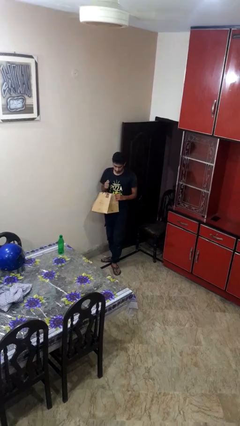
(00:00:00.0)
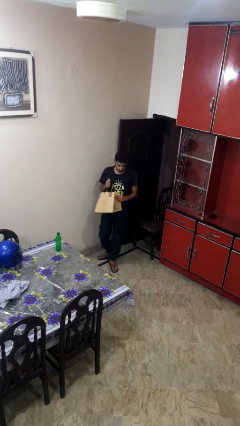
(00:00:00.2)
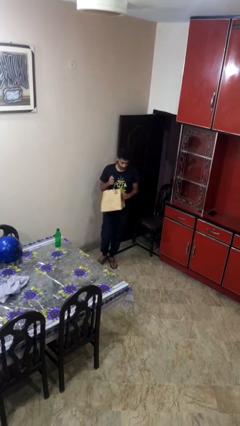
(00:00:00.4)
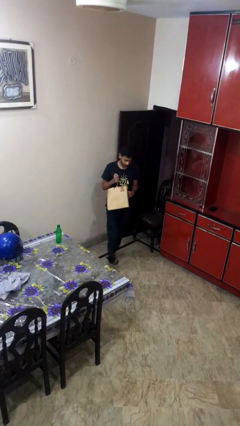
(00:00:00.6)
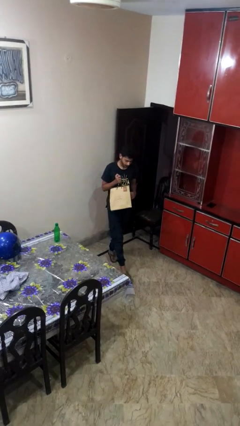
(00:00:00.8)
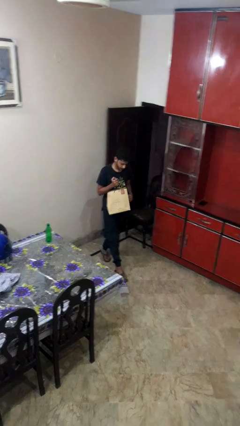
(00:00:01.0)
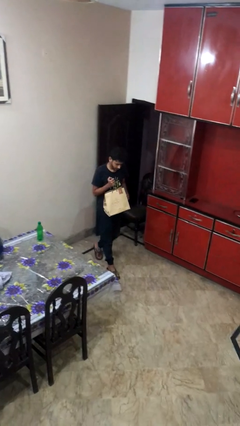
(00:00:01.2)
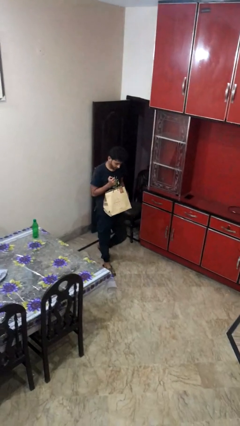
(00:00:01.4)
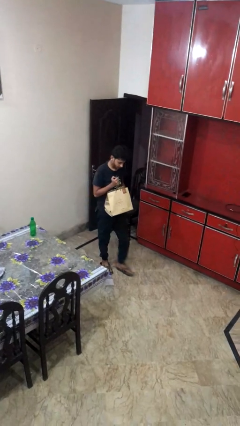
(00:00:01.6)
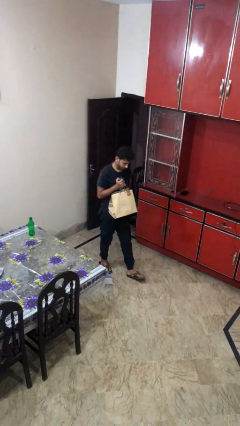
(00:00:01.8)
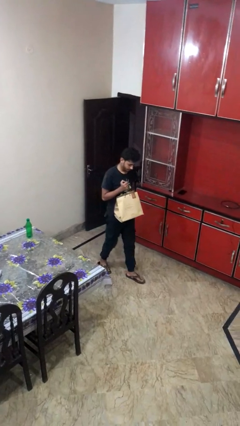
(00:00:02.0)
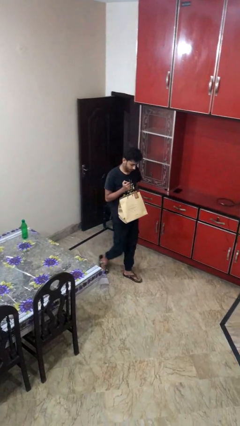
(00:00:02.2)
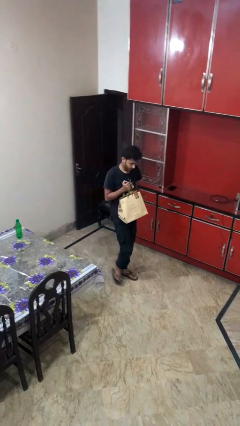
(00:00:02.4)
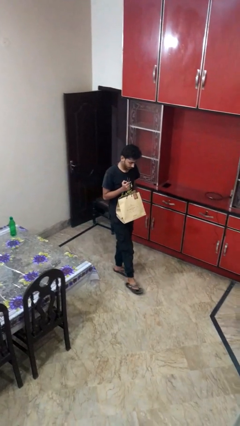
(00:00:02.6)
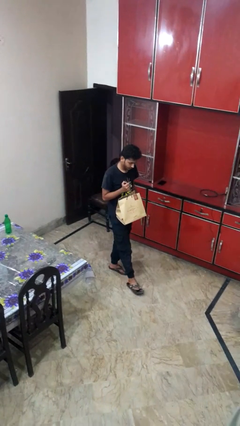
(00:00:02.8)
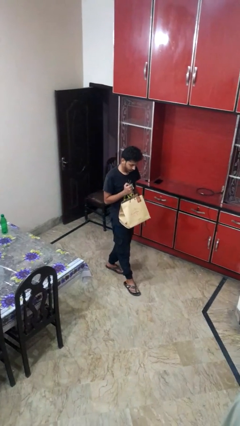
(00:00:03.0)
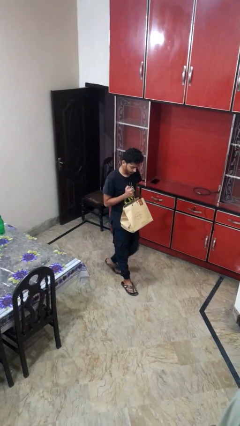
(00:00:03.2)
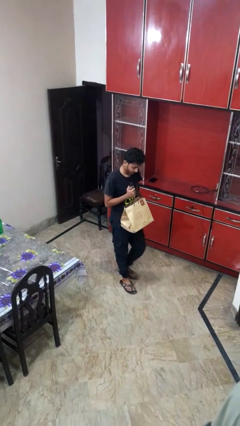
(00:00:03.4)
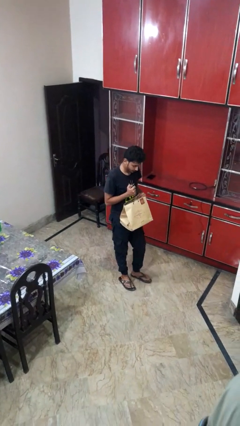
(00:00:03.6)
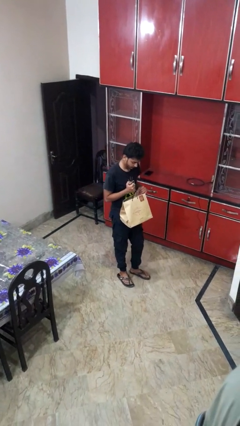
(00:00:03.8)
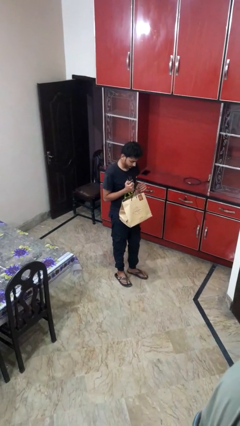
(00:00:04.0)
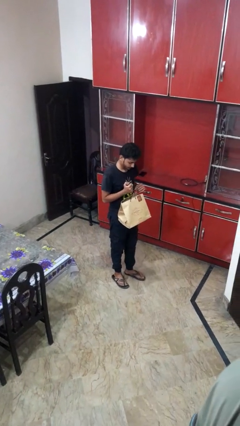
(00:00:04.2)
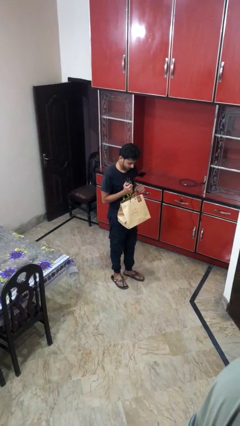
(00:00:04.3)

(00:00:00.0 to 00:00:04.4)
person carries groceries

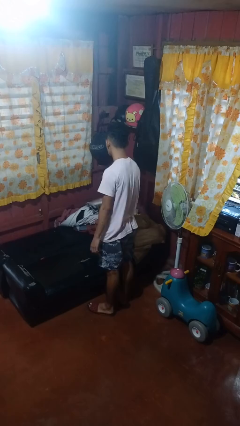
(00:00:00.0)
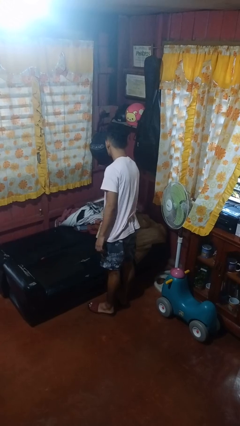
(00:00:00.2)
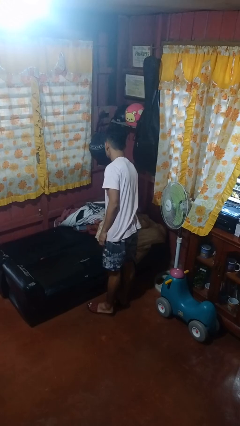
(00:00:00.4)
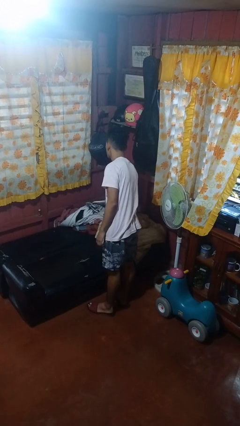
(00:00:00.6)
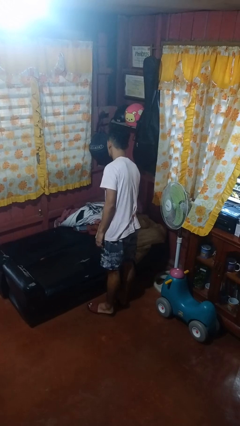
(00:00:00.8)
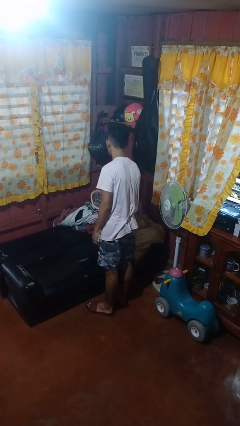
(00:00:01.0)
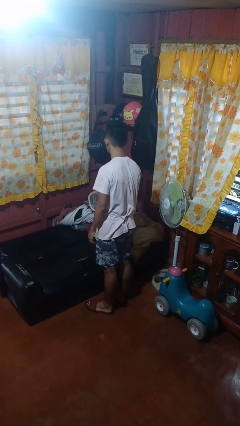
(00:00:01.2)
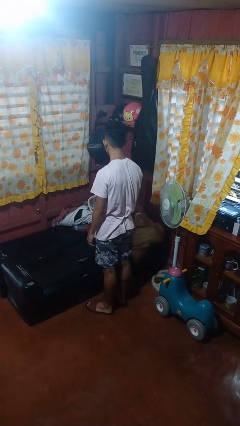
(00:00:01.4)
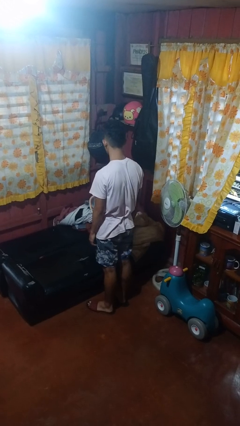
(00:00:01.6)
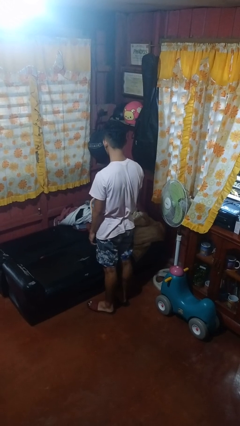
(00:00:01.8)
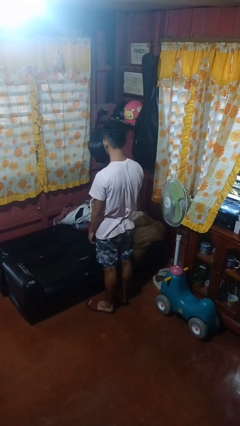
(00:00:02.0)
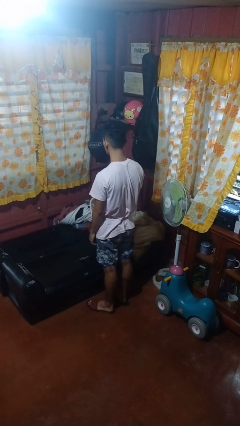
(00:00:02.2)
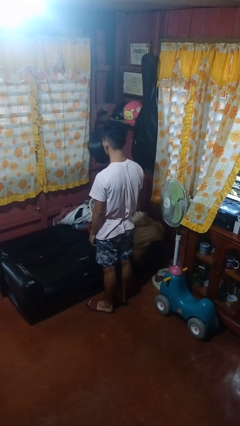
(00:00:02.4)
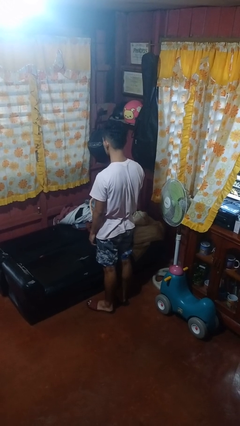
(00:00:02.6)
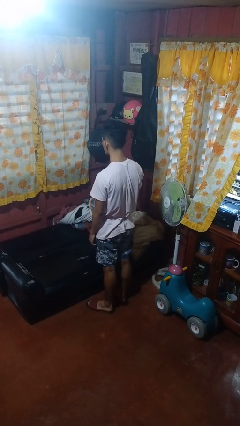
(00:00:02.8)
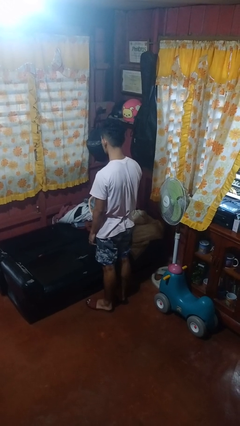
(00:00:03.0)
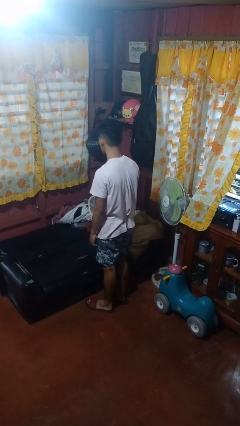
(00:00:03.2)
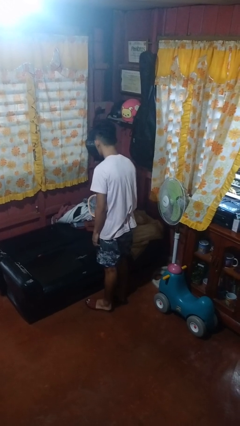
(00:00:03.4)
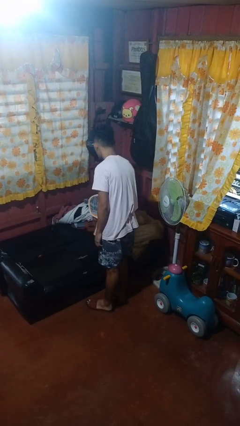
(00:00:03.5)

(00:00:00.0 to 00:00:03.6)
person puts down object on couch

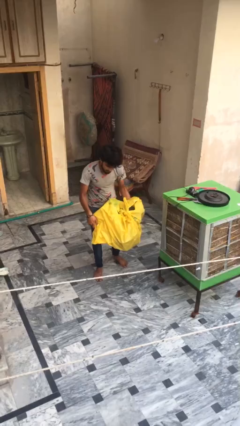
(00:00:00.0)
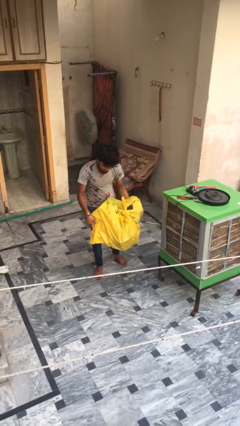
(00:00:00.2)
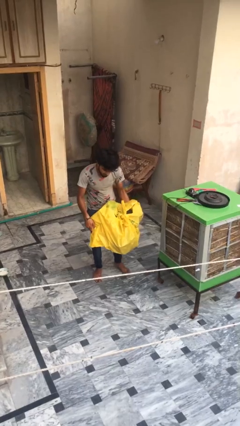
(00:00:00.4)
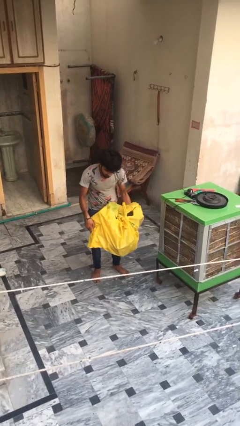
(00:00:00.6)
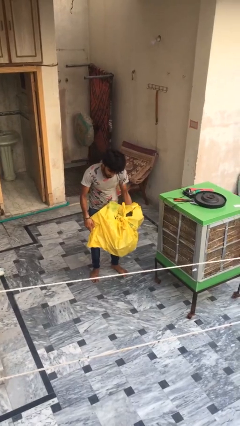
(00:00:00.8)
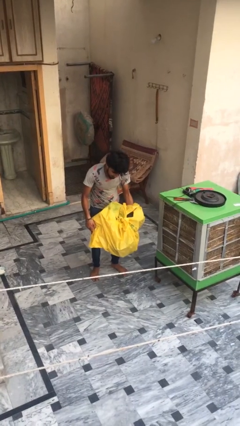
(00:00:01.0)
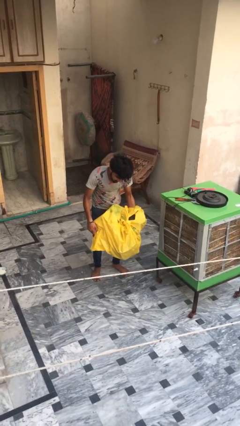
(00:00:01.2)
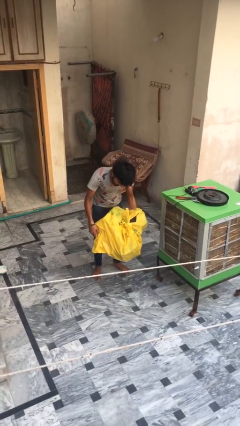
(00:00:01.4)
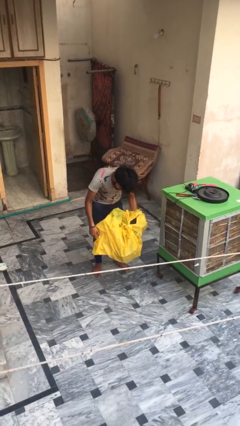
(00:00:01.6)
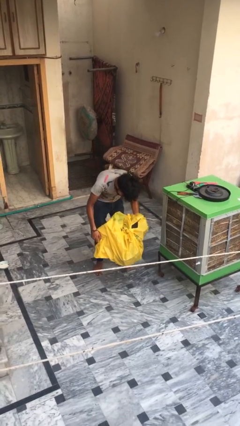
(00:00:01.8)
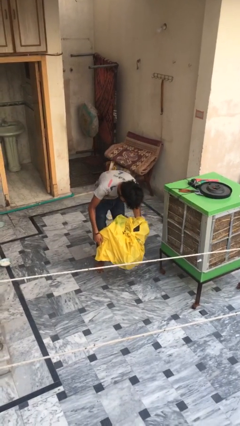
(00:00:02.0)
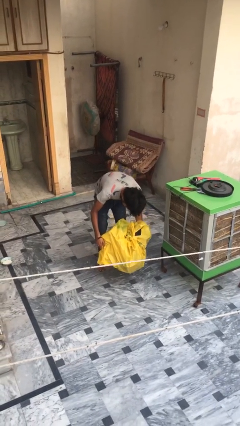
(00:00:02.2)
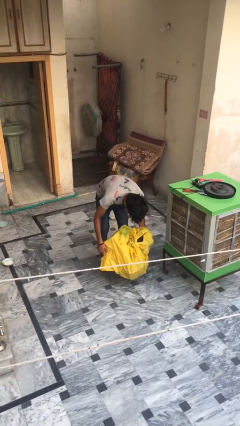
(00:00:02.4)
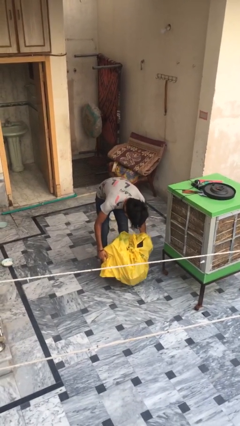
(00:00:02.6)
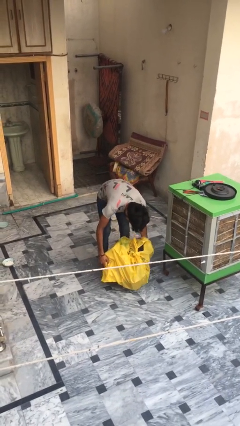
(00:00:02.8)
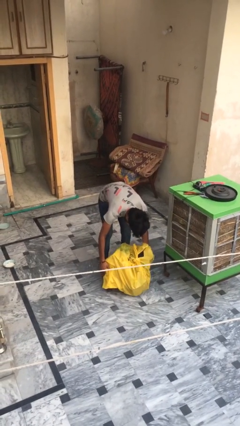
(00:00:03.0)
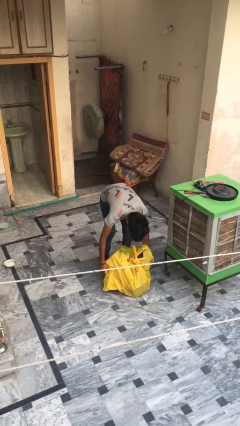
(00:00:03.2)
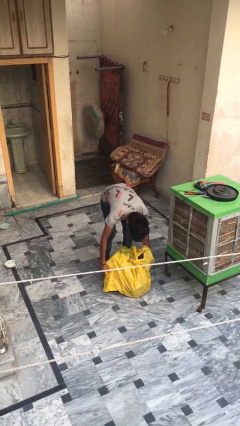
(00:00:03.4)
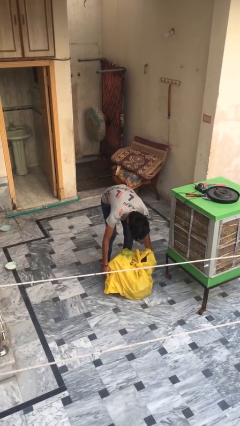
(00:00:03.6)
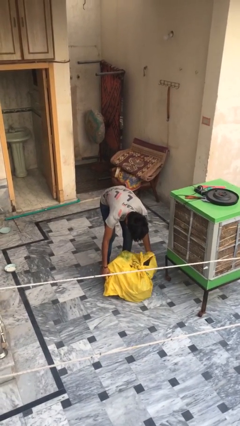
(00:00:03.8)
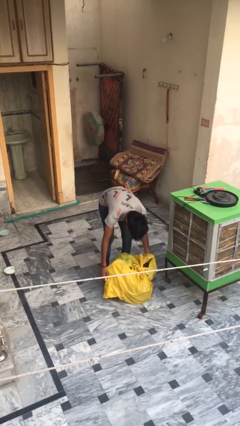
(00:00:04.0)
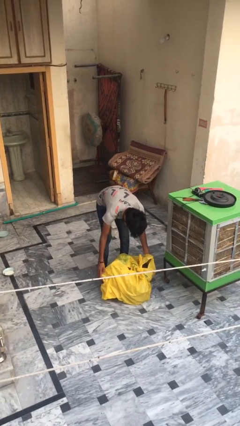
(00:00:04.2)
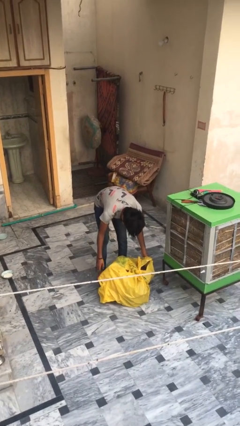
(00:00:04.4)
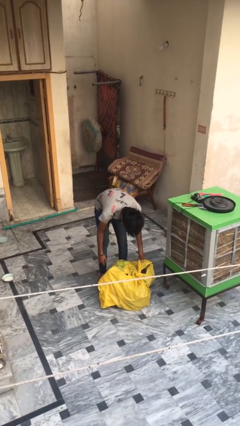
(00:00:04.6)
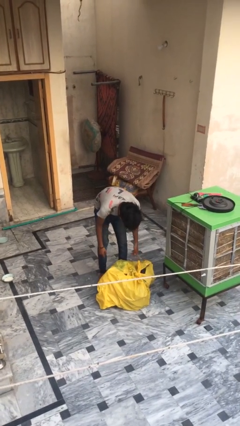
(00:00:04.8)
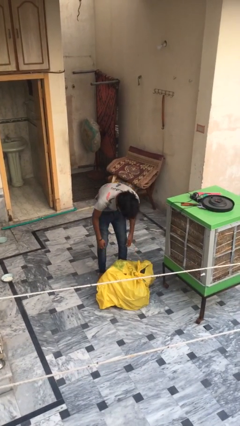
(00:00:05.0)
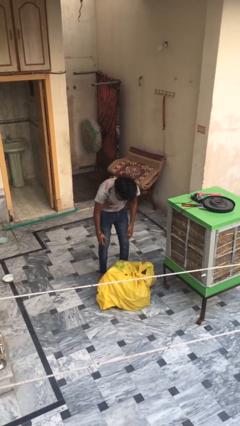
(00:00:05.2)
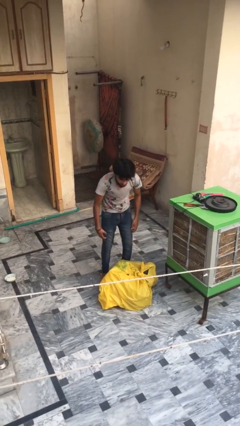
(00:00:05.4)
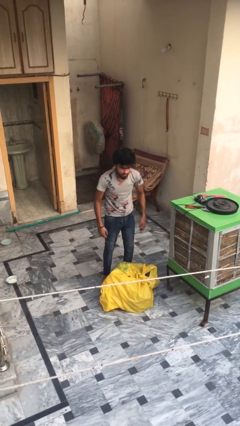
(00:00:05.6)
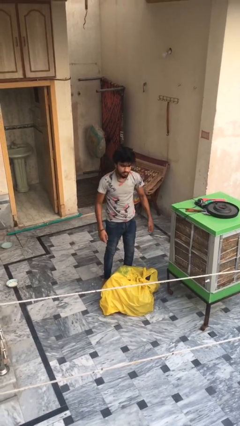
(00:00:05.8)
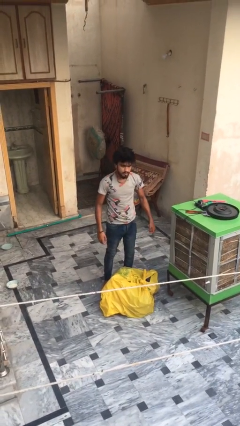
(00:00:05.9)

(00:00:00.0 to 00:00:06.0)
person puts down object on floor

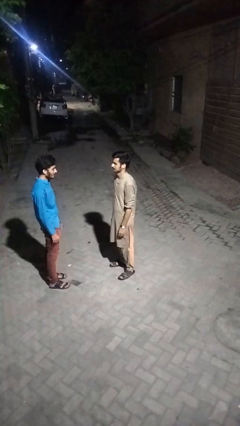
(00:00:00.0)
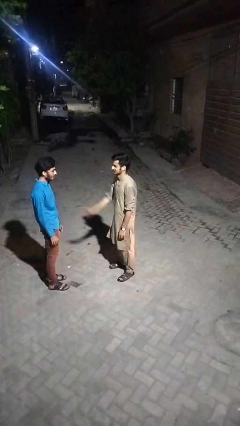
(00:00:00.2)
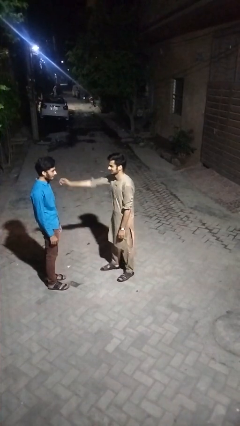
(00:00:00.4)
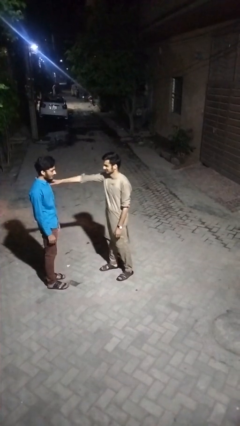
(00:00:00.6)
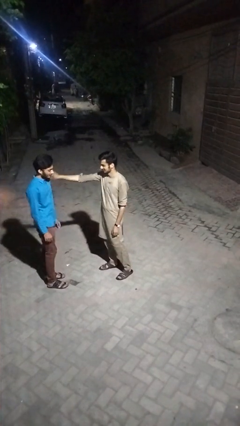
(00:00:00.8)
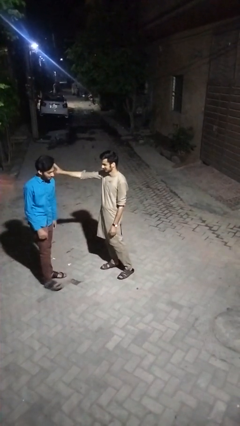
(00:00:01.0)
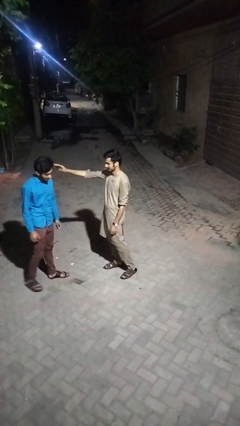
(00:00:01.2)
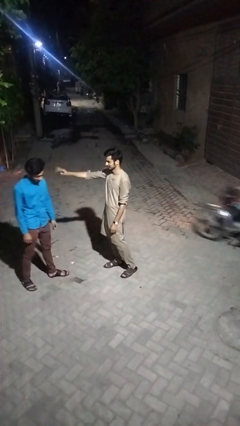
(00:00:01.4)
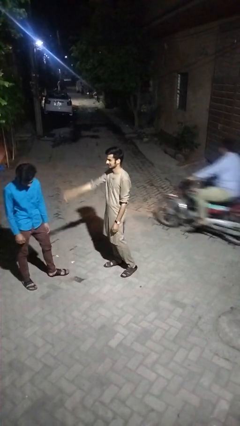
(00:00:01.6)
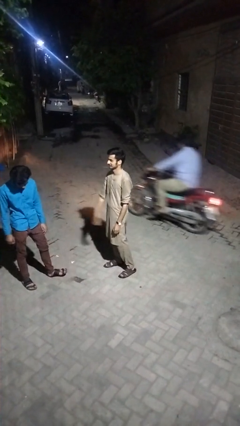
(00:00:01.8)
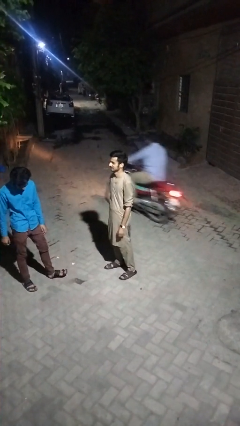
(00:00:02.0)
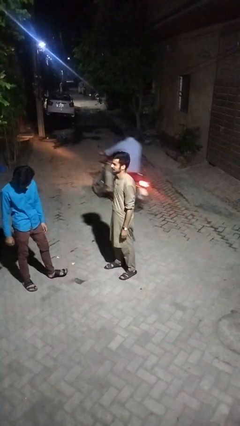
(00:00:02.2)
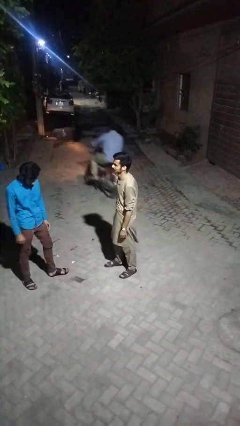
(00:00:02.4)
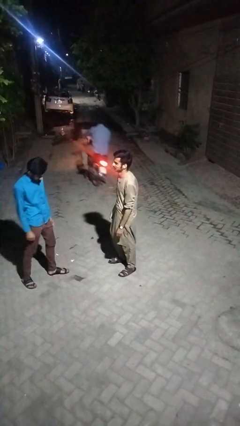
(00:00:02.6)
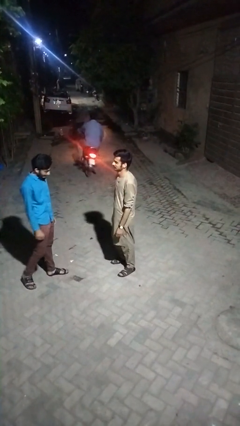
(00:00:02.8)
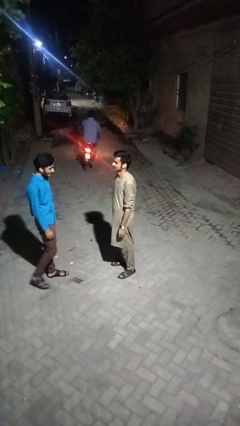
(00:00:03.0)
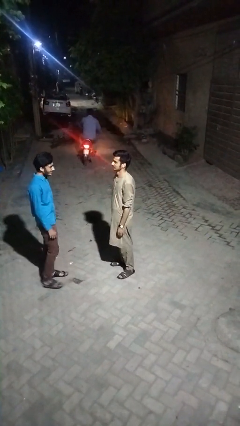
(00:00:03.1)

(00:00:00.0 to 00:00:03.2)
person shoves person

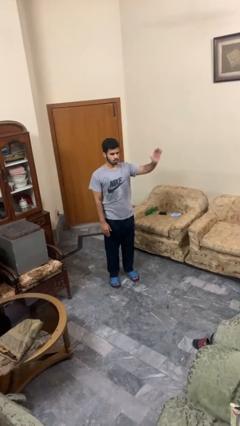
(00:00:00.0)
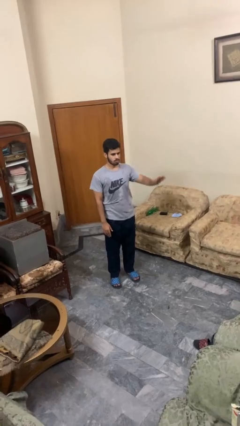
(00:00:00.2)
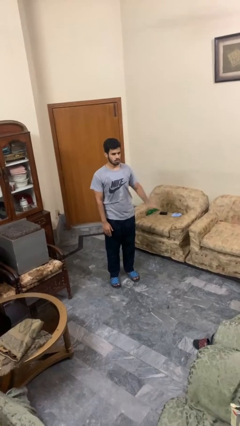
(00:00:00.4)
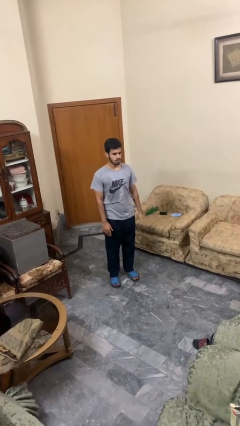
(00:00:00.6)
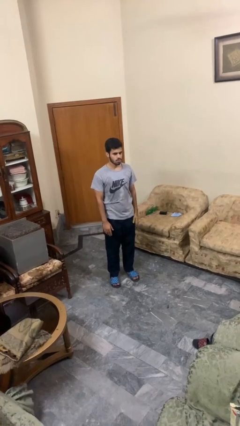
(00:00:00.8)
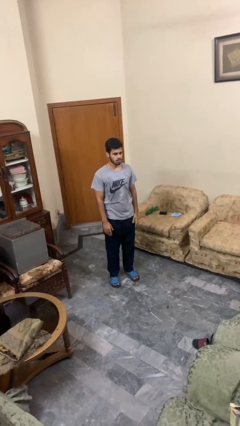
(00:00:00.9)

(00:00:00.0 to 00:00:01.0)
person gestures lower hand
